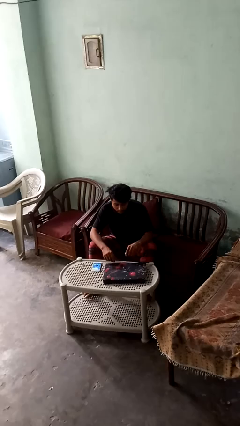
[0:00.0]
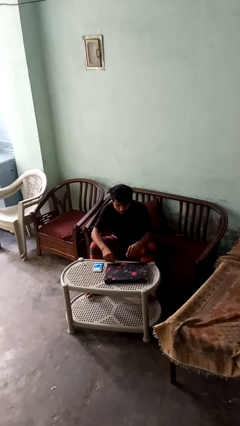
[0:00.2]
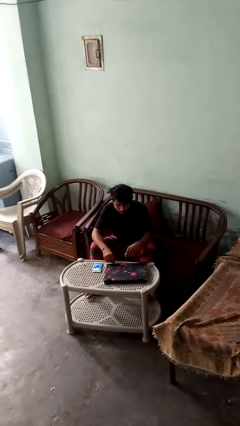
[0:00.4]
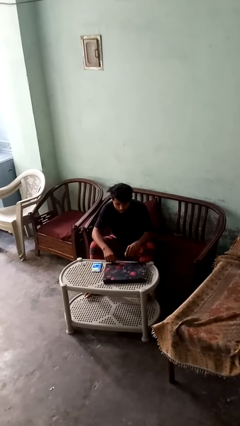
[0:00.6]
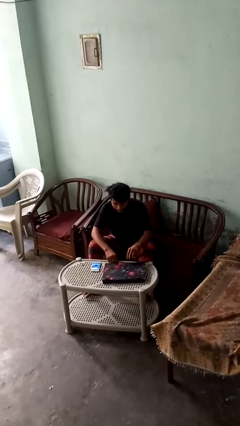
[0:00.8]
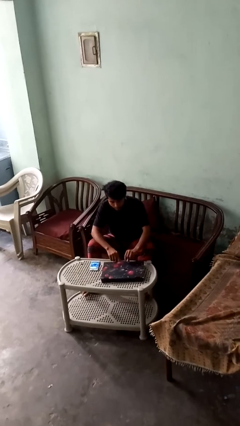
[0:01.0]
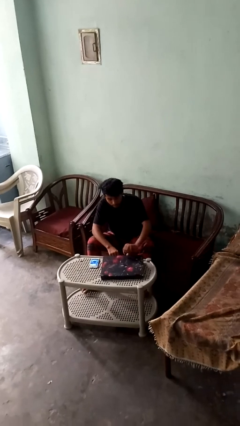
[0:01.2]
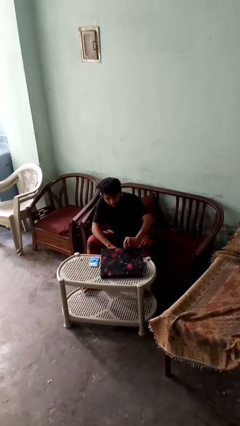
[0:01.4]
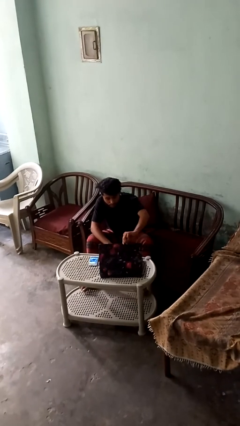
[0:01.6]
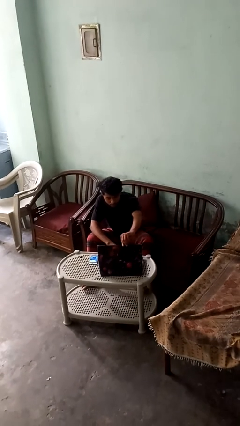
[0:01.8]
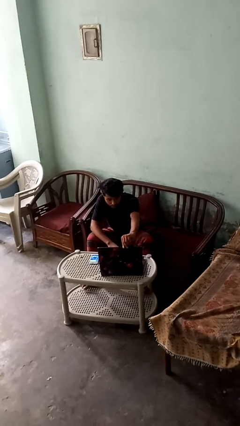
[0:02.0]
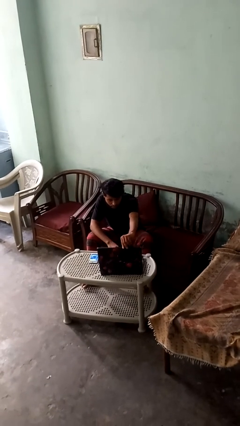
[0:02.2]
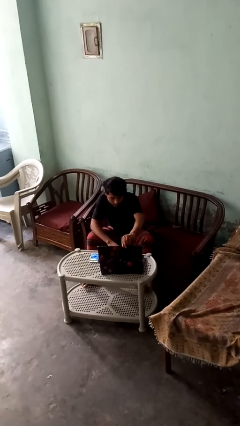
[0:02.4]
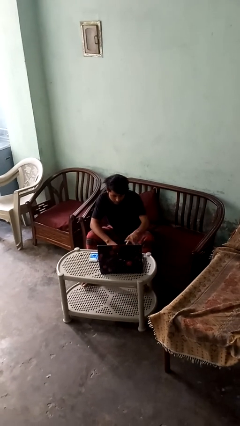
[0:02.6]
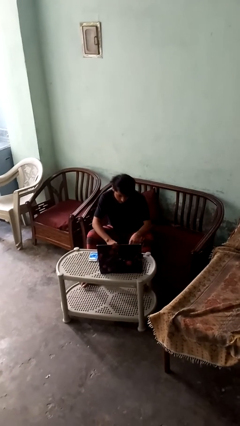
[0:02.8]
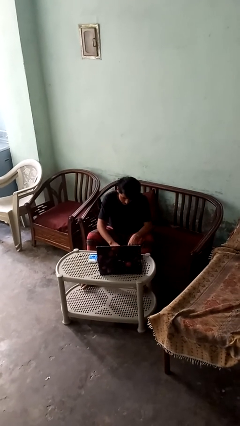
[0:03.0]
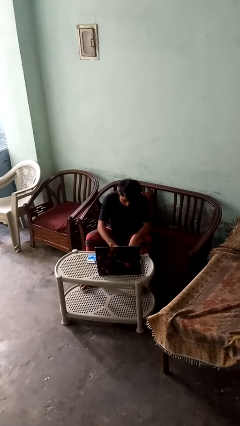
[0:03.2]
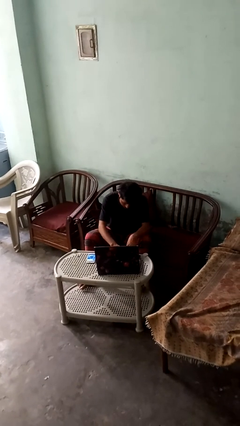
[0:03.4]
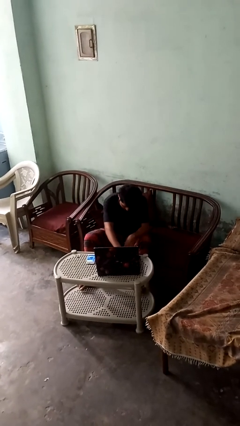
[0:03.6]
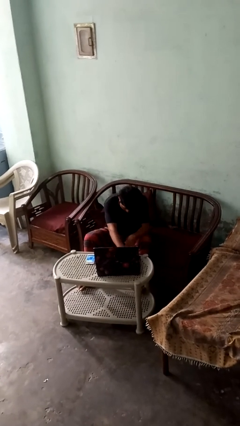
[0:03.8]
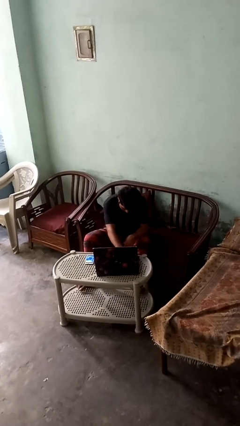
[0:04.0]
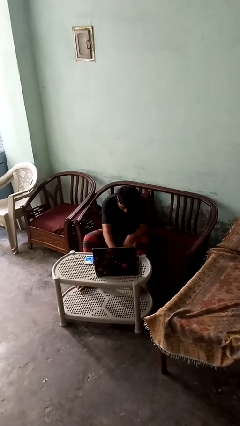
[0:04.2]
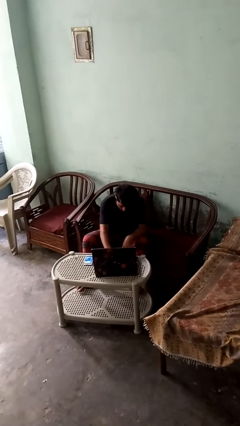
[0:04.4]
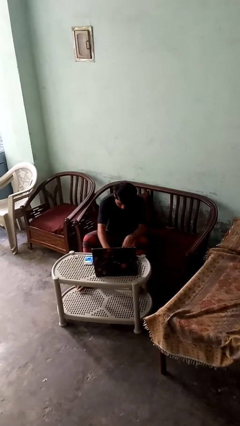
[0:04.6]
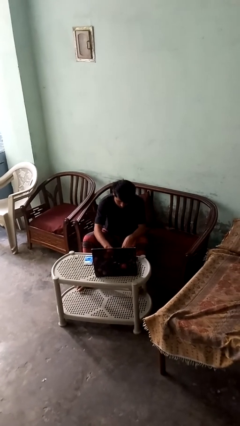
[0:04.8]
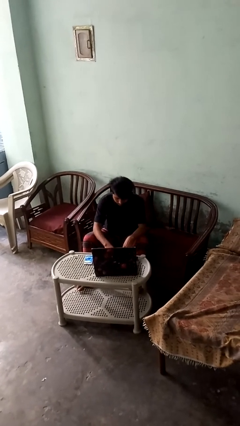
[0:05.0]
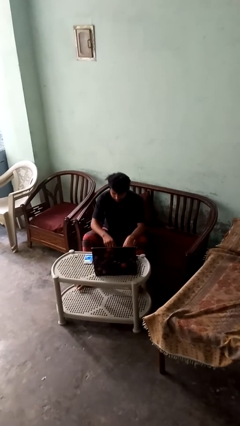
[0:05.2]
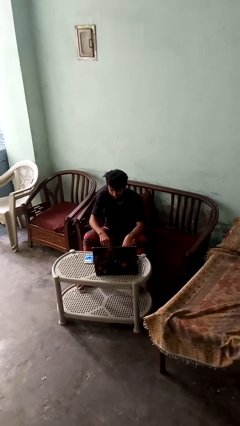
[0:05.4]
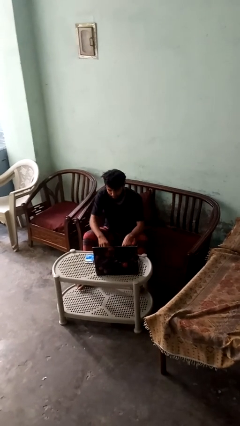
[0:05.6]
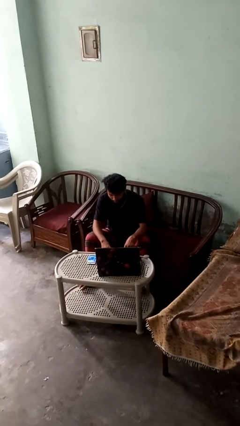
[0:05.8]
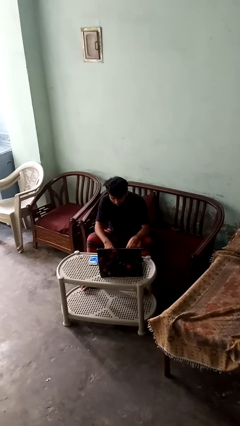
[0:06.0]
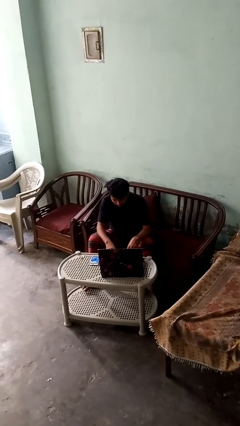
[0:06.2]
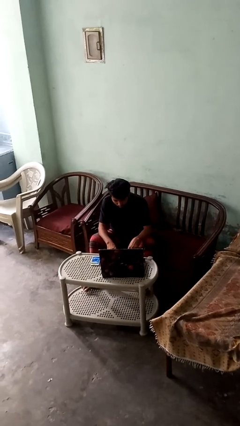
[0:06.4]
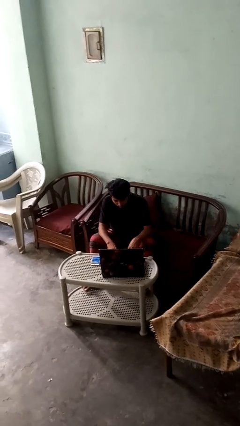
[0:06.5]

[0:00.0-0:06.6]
person opens laptop

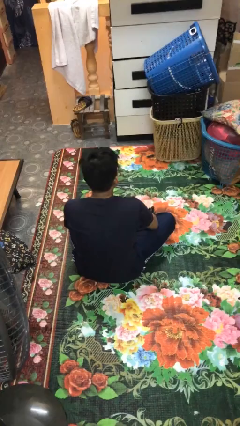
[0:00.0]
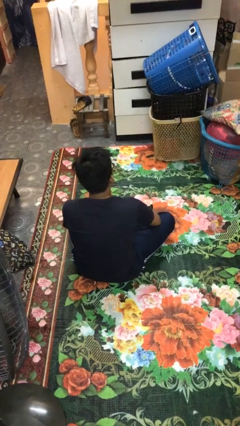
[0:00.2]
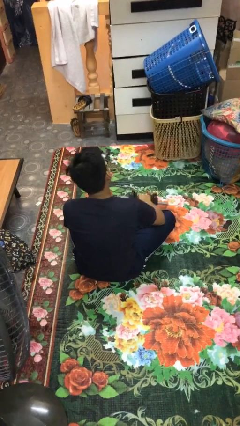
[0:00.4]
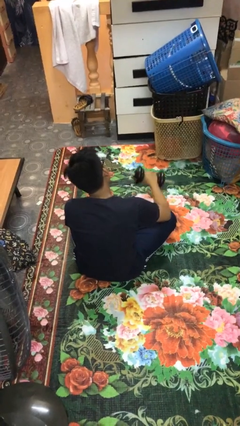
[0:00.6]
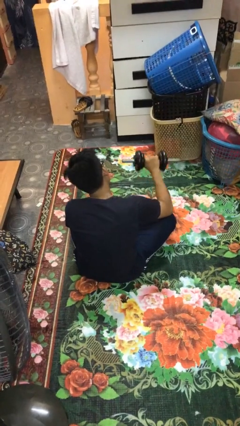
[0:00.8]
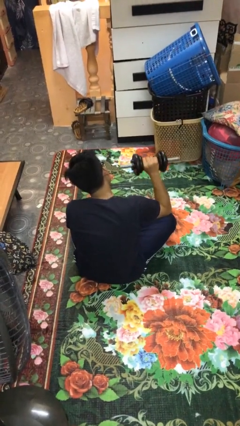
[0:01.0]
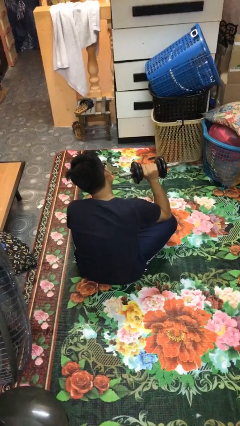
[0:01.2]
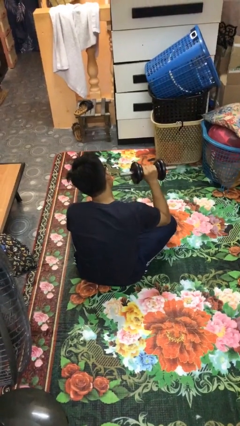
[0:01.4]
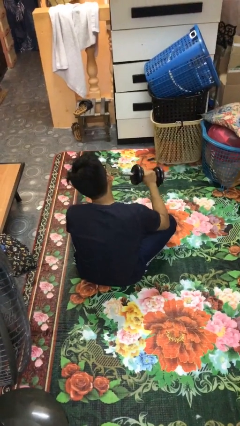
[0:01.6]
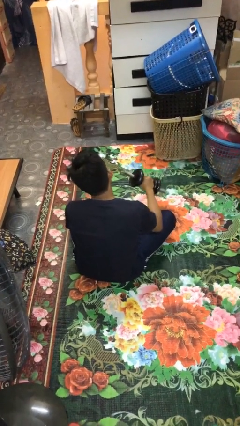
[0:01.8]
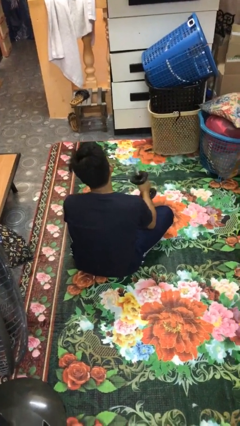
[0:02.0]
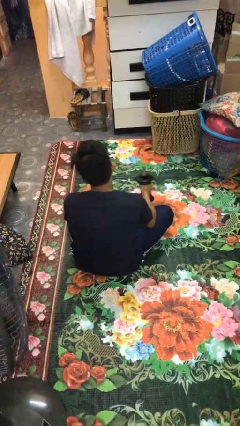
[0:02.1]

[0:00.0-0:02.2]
person lifts dumbbells

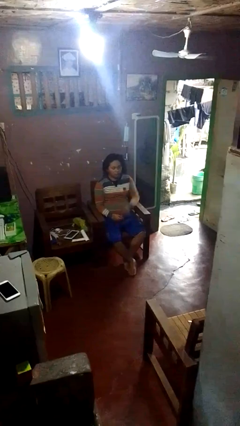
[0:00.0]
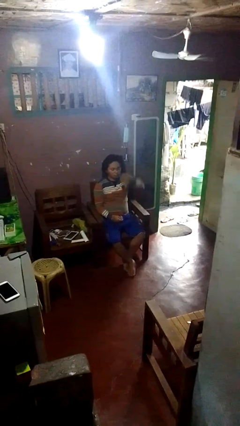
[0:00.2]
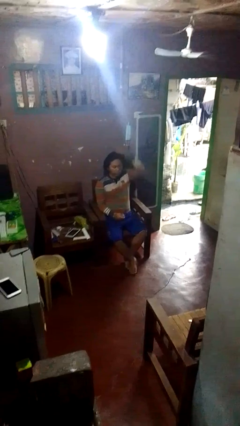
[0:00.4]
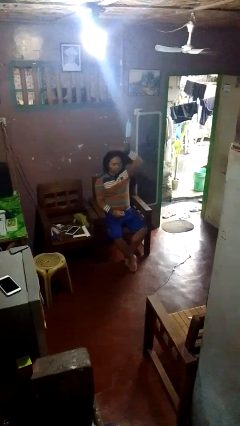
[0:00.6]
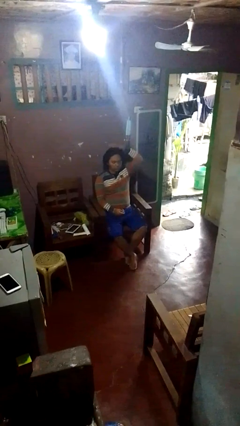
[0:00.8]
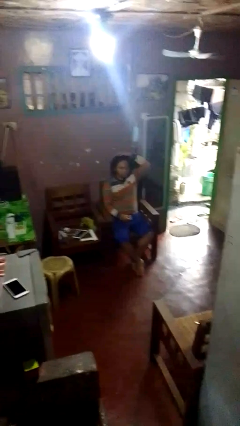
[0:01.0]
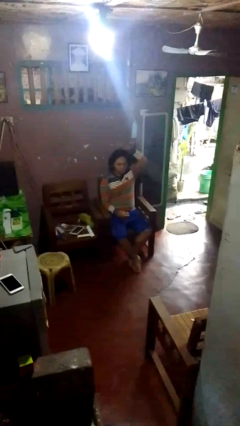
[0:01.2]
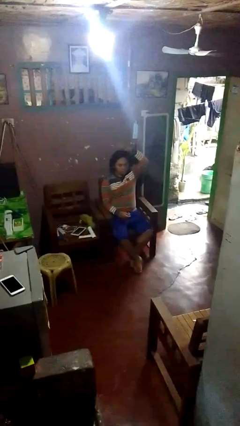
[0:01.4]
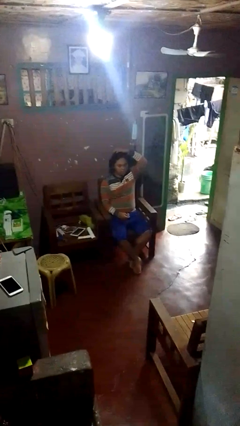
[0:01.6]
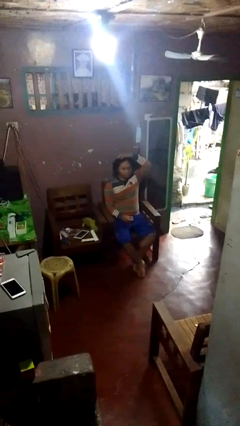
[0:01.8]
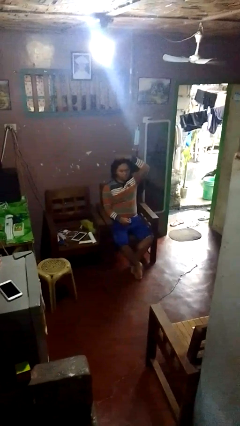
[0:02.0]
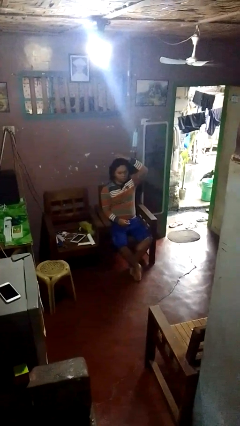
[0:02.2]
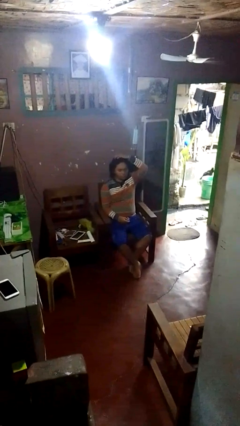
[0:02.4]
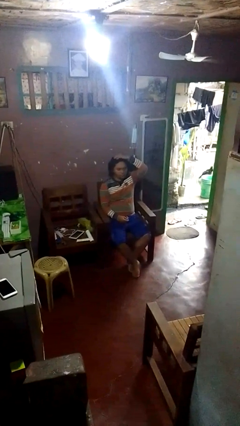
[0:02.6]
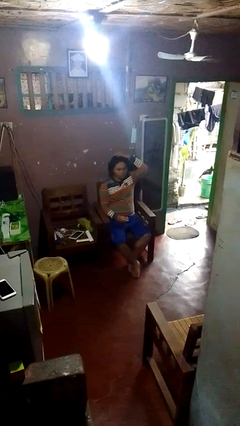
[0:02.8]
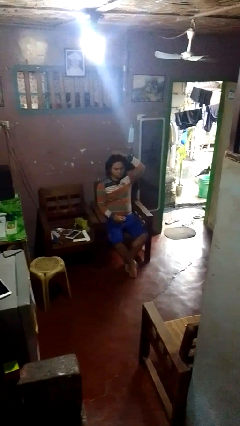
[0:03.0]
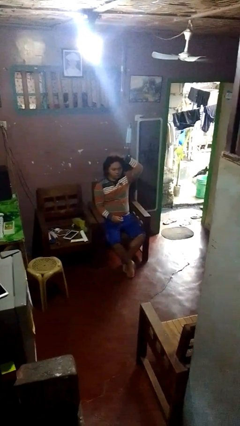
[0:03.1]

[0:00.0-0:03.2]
person pats head

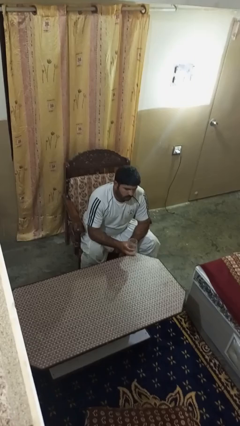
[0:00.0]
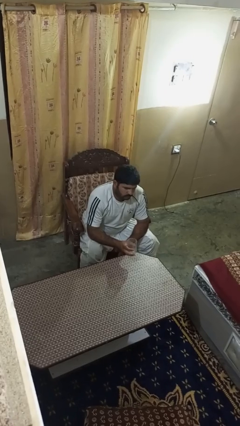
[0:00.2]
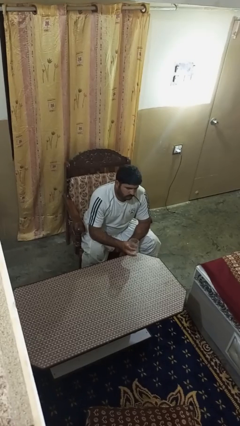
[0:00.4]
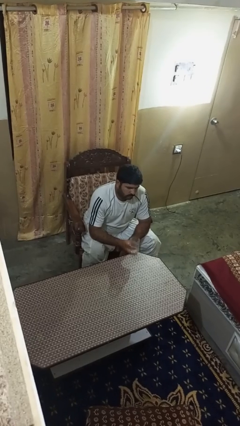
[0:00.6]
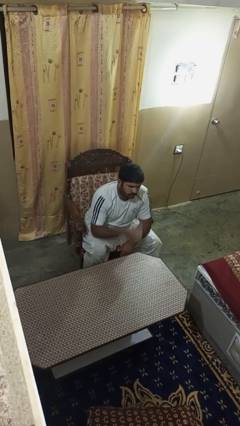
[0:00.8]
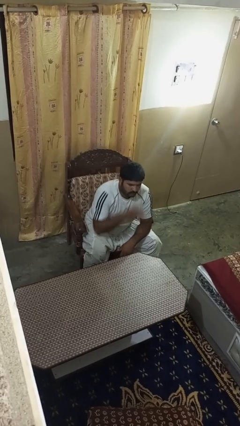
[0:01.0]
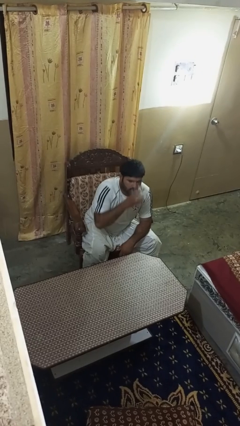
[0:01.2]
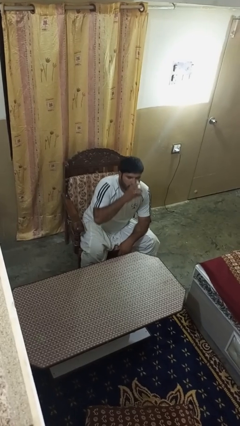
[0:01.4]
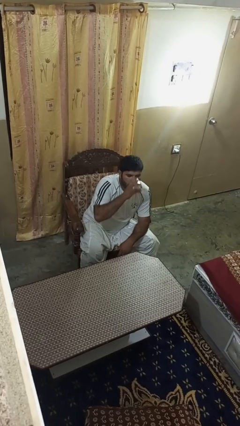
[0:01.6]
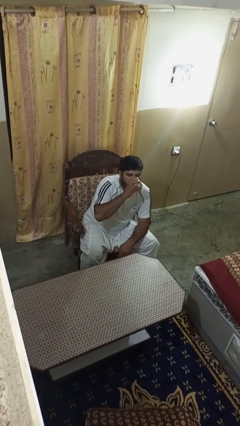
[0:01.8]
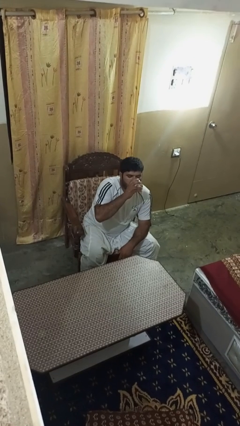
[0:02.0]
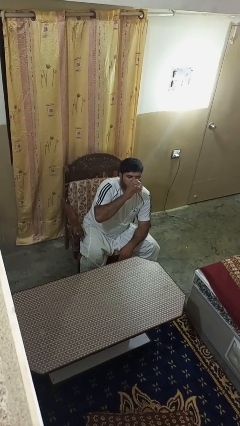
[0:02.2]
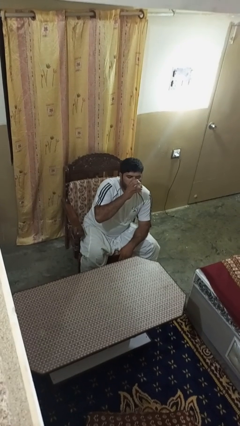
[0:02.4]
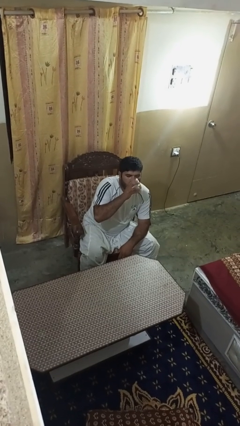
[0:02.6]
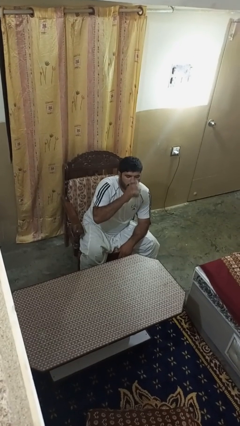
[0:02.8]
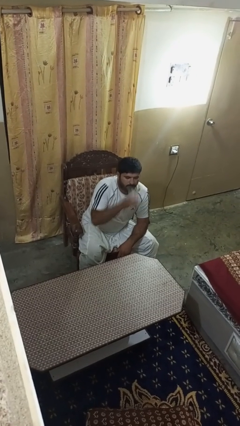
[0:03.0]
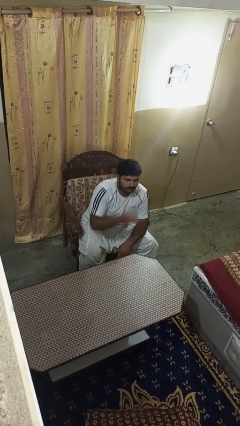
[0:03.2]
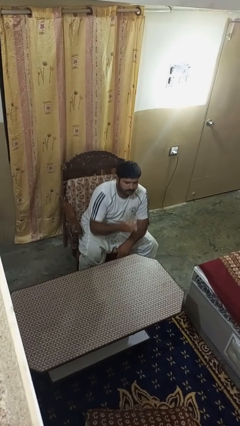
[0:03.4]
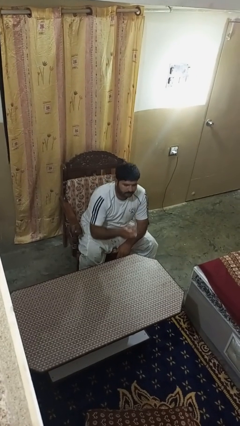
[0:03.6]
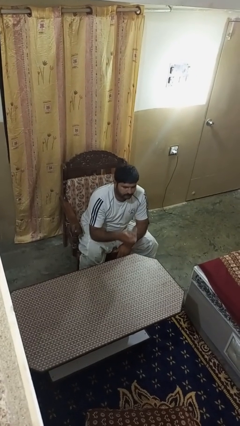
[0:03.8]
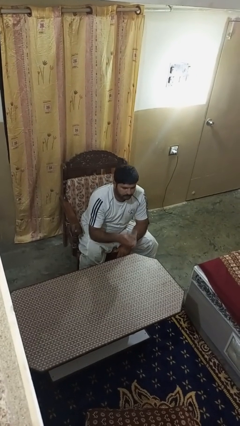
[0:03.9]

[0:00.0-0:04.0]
person drinks from shotglass

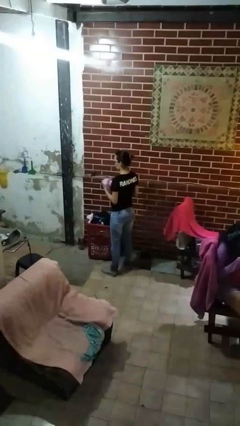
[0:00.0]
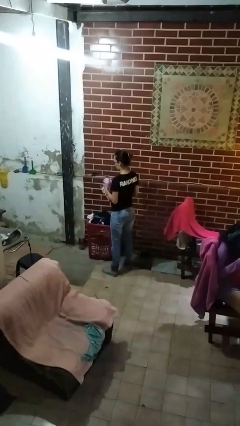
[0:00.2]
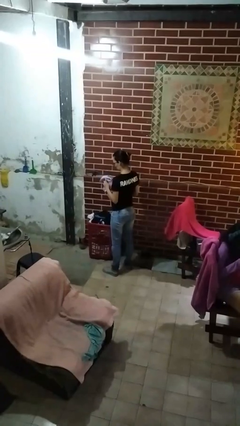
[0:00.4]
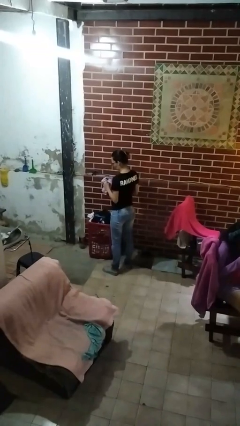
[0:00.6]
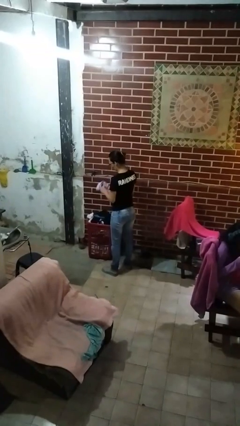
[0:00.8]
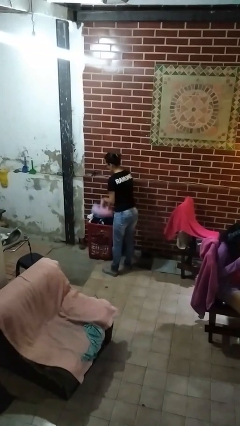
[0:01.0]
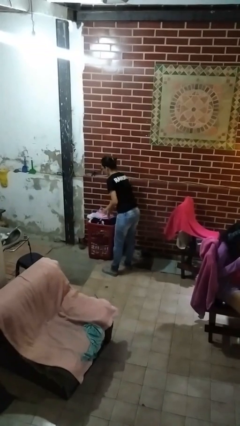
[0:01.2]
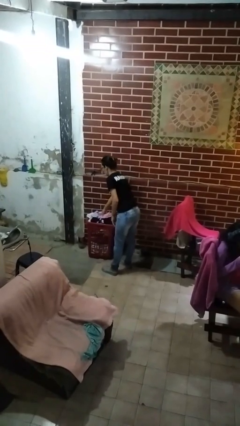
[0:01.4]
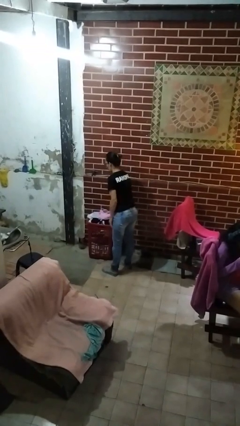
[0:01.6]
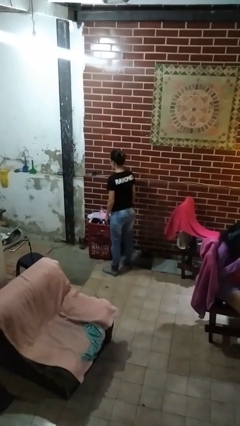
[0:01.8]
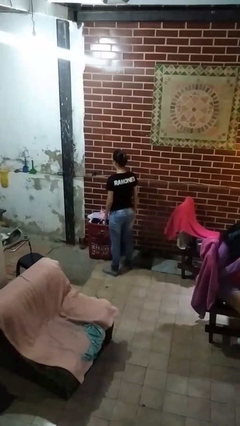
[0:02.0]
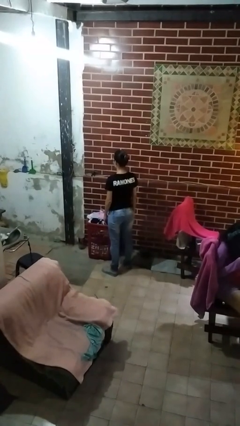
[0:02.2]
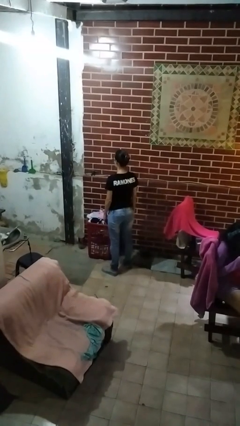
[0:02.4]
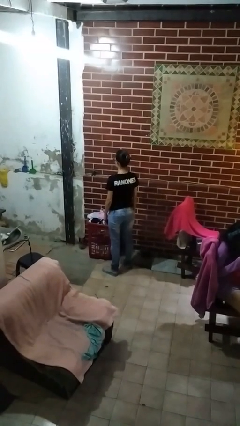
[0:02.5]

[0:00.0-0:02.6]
person puts object into basket
